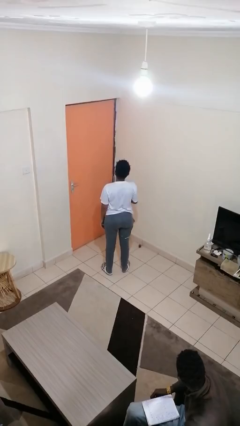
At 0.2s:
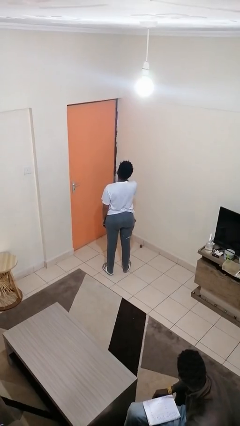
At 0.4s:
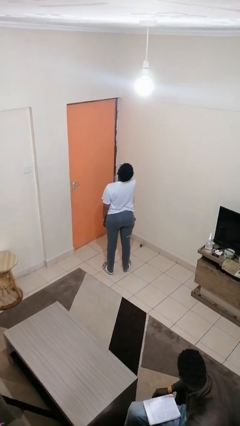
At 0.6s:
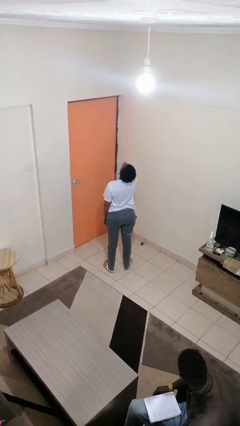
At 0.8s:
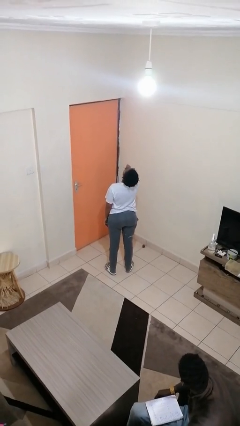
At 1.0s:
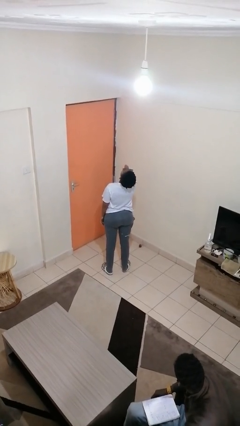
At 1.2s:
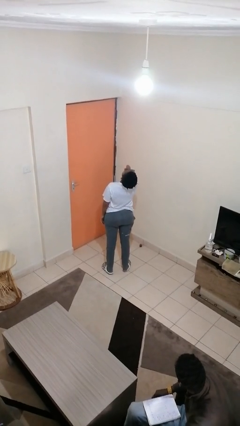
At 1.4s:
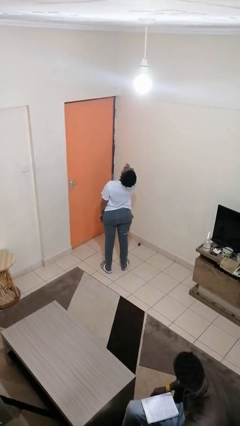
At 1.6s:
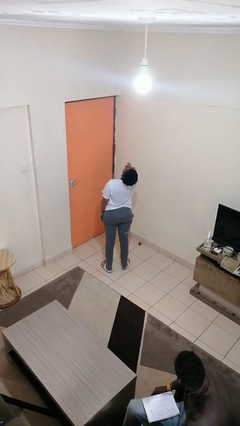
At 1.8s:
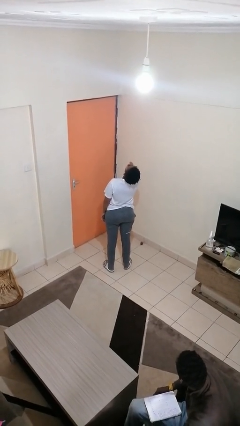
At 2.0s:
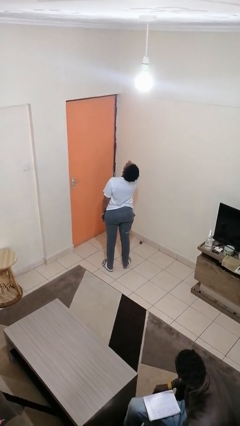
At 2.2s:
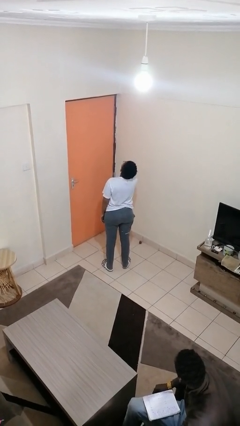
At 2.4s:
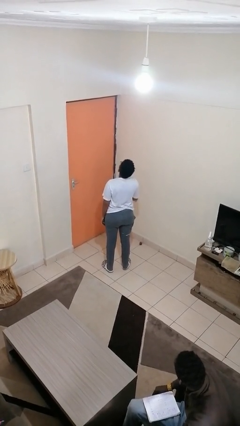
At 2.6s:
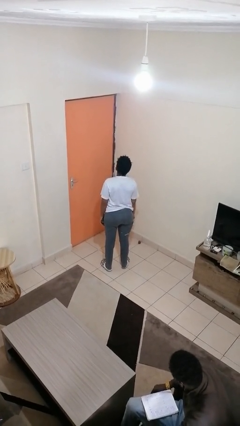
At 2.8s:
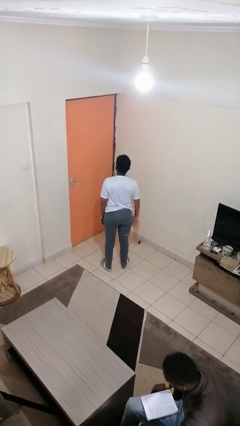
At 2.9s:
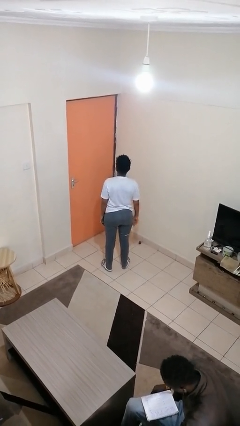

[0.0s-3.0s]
person yawns

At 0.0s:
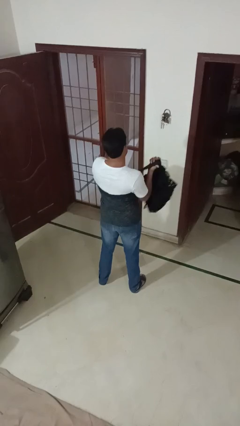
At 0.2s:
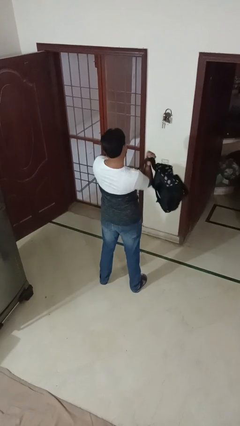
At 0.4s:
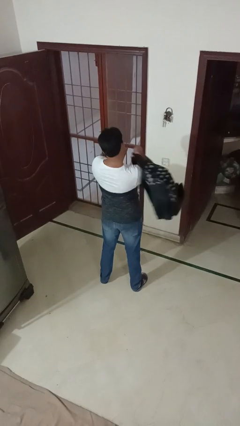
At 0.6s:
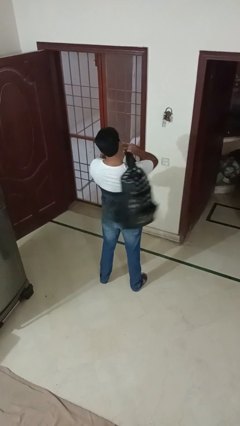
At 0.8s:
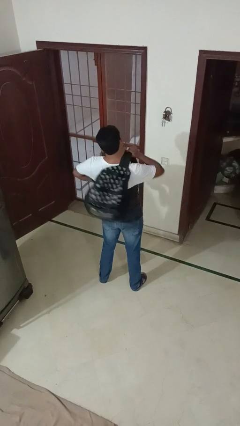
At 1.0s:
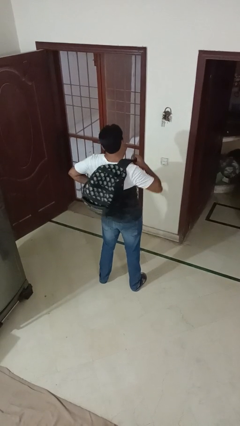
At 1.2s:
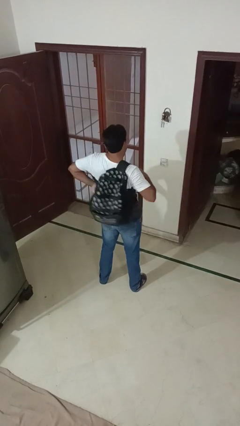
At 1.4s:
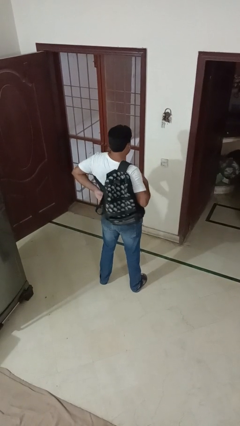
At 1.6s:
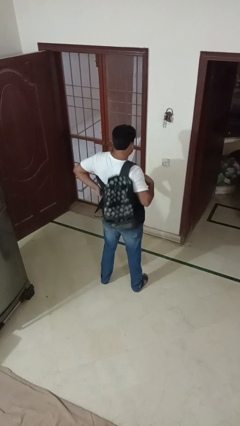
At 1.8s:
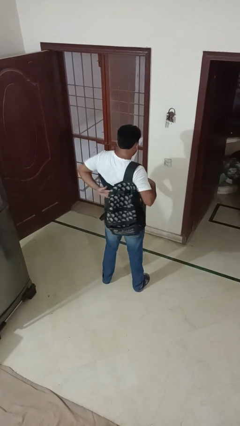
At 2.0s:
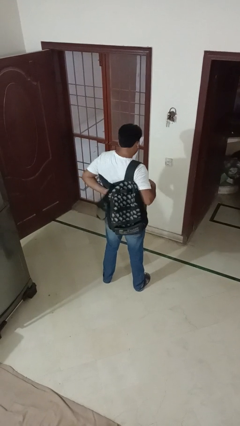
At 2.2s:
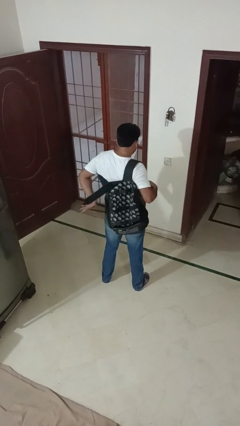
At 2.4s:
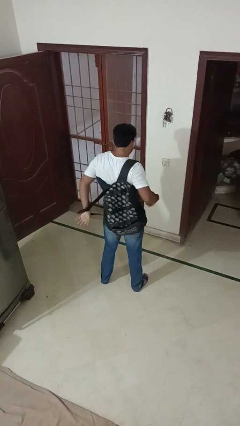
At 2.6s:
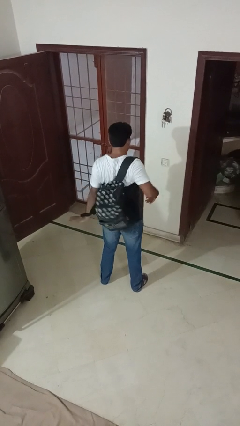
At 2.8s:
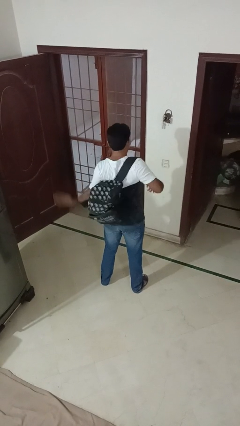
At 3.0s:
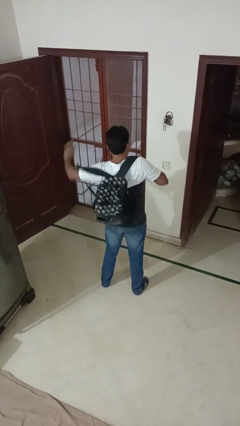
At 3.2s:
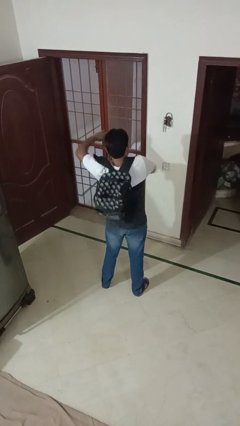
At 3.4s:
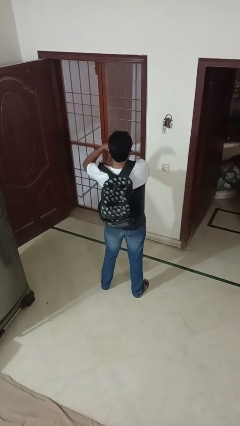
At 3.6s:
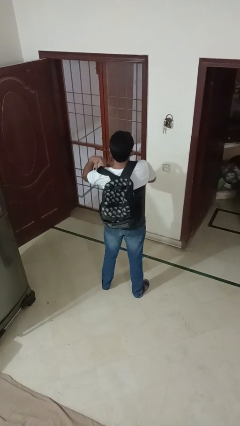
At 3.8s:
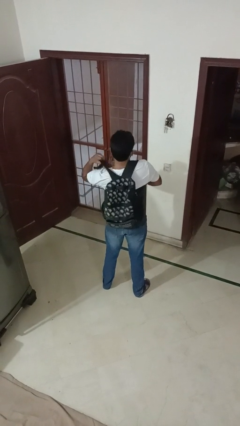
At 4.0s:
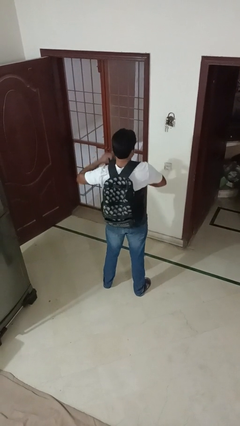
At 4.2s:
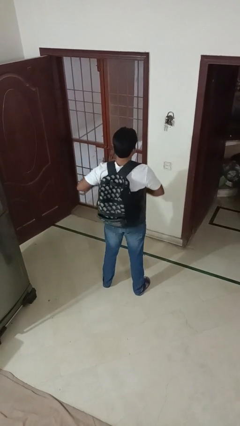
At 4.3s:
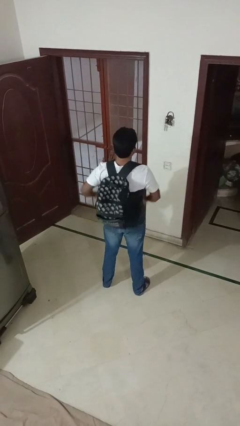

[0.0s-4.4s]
person puts on backpack

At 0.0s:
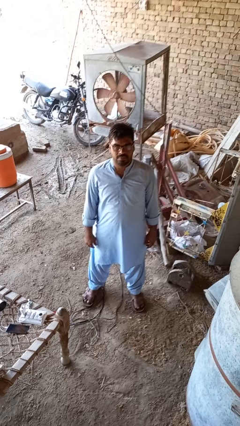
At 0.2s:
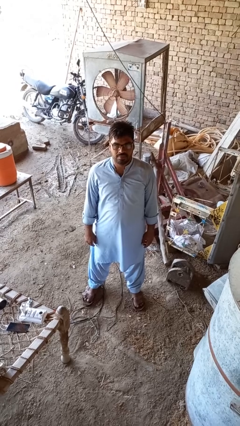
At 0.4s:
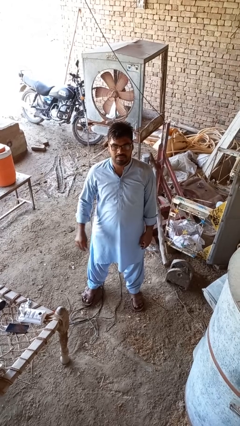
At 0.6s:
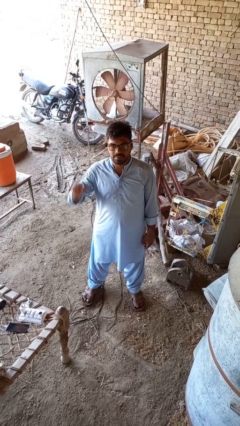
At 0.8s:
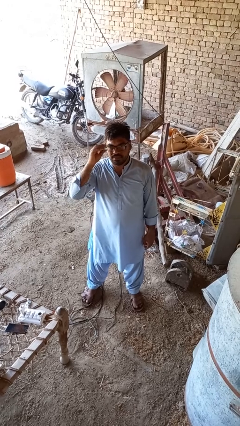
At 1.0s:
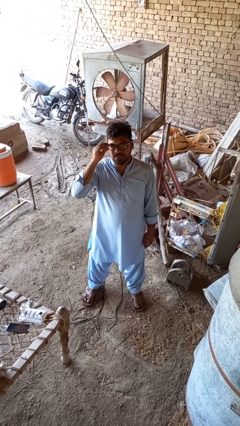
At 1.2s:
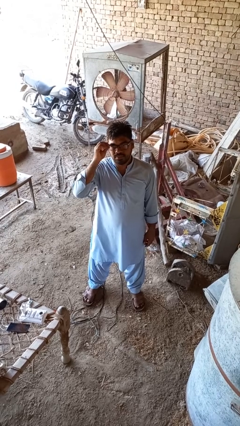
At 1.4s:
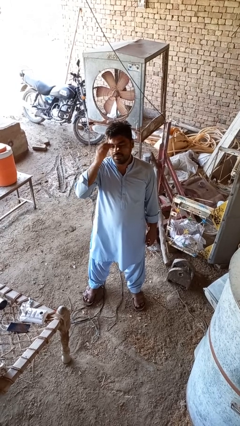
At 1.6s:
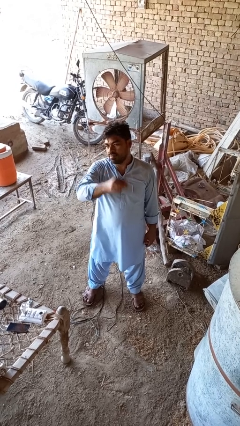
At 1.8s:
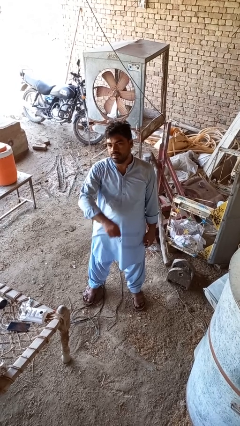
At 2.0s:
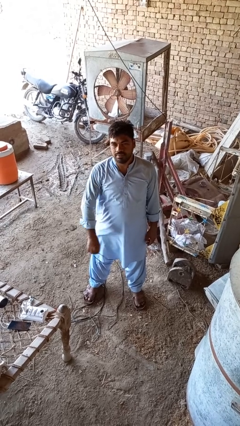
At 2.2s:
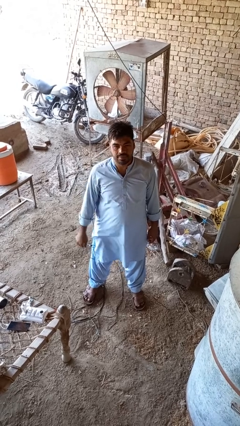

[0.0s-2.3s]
person takes off glasses

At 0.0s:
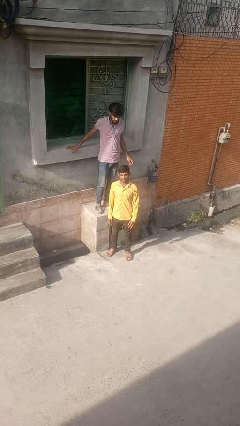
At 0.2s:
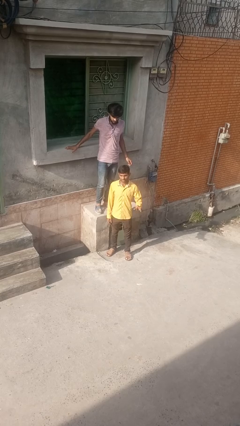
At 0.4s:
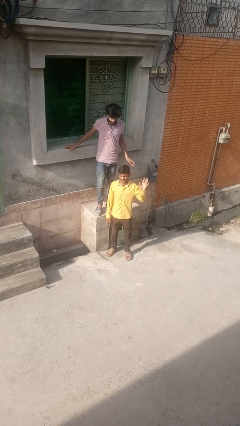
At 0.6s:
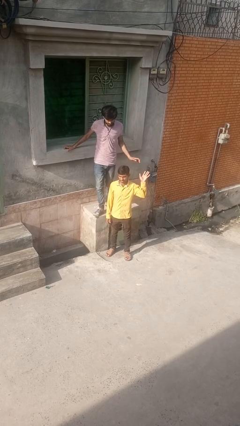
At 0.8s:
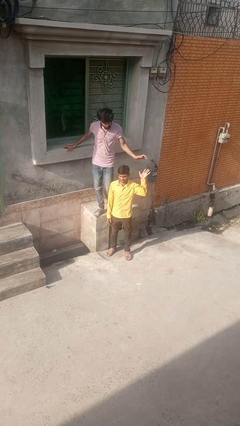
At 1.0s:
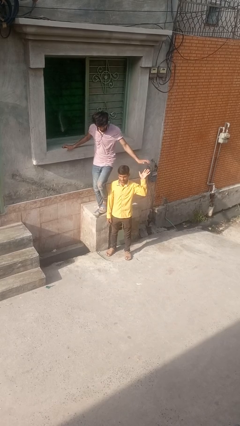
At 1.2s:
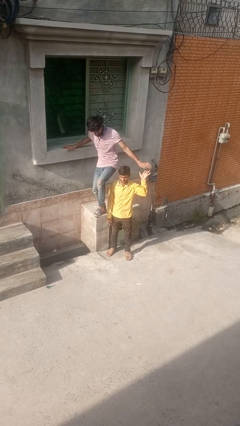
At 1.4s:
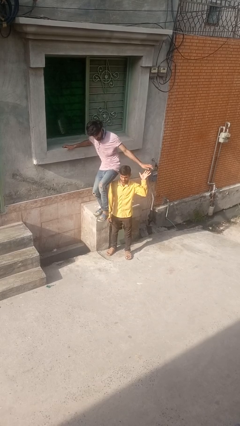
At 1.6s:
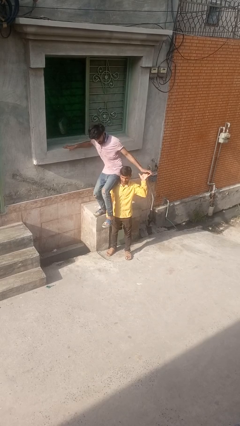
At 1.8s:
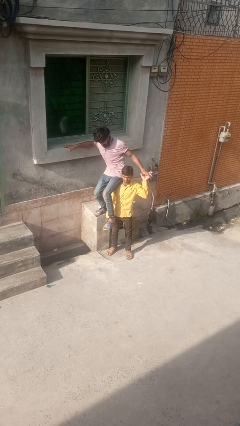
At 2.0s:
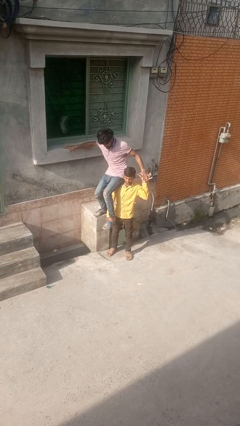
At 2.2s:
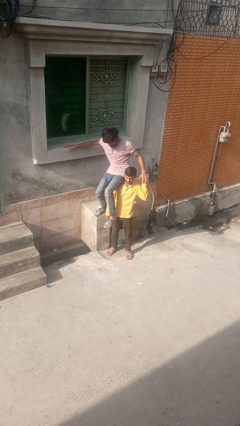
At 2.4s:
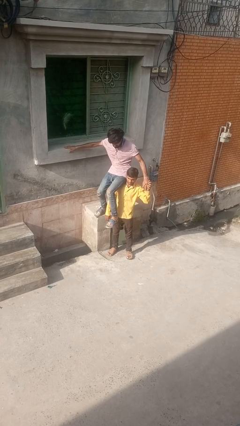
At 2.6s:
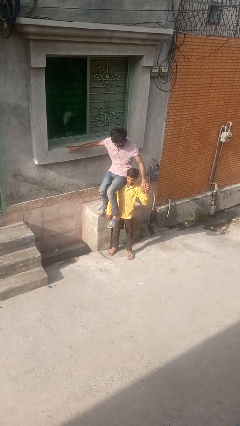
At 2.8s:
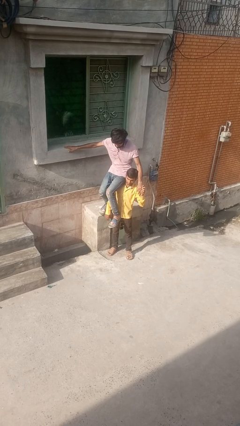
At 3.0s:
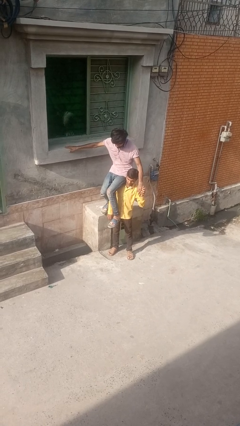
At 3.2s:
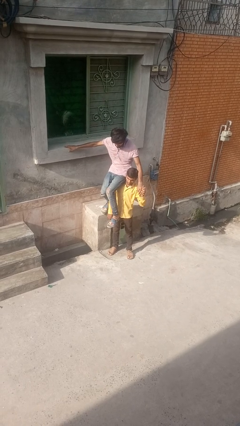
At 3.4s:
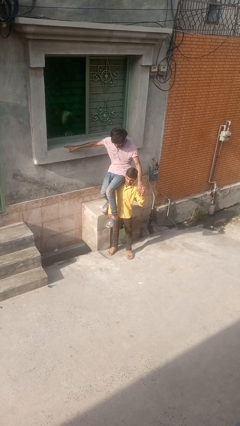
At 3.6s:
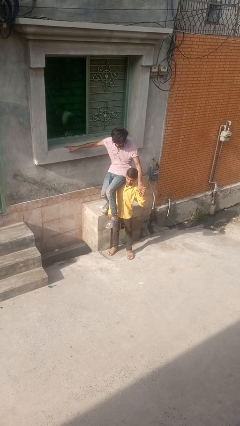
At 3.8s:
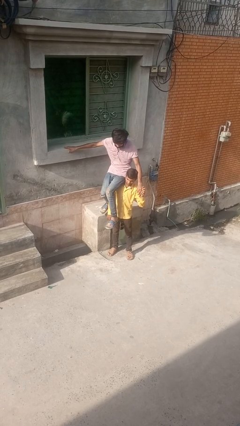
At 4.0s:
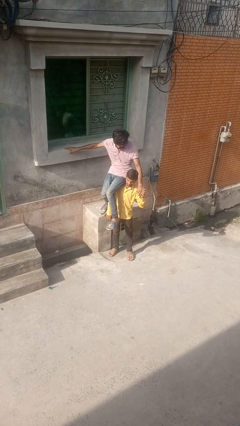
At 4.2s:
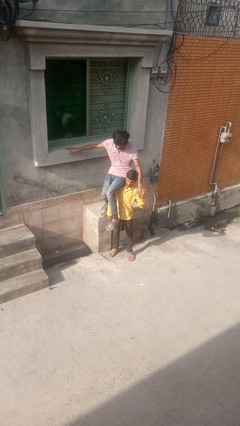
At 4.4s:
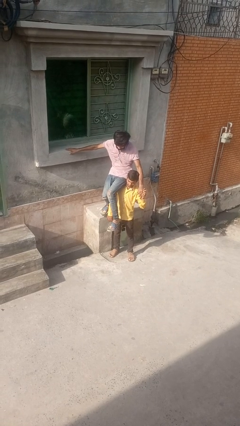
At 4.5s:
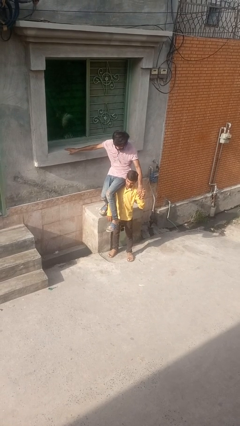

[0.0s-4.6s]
person carries person over shoulder

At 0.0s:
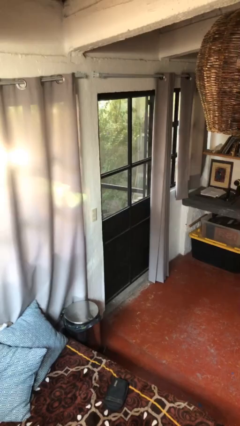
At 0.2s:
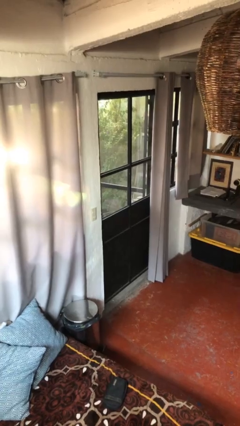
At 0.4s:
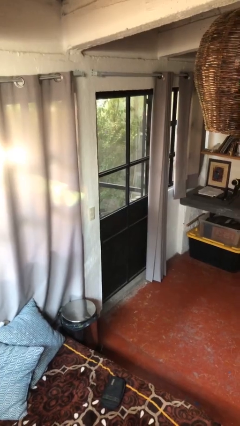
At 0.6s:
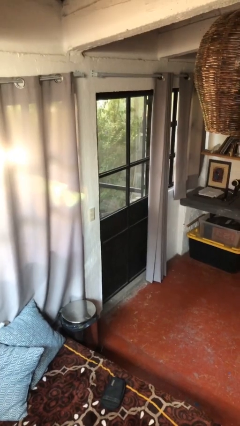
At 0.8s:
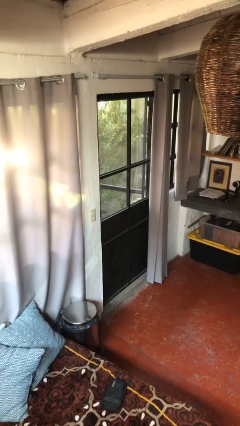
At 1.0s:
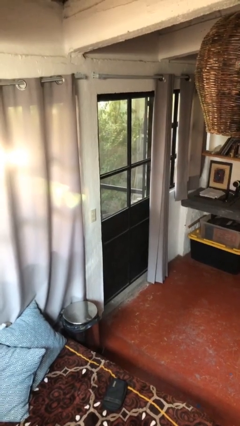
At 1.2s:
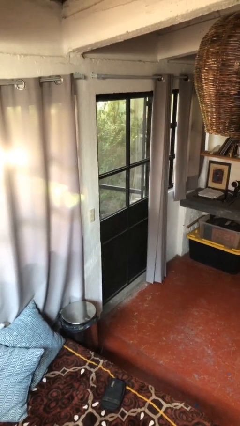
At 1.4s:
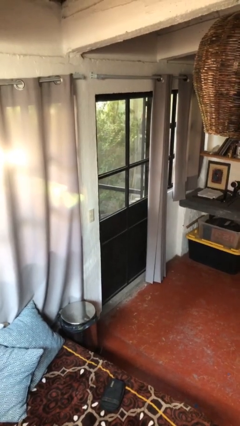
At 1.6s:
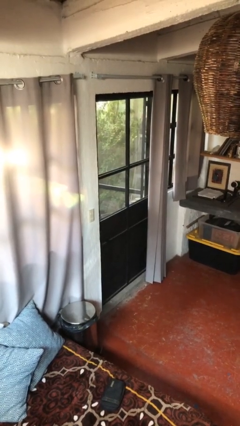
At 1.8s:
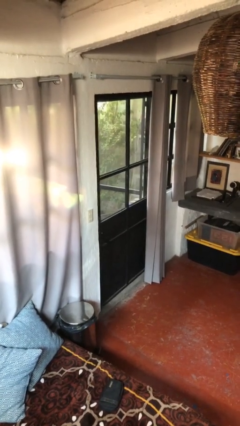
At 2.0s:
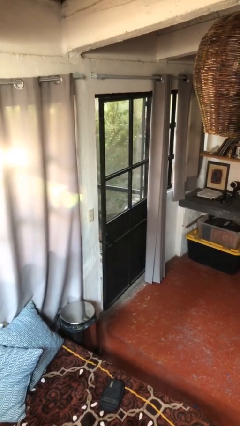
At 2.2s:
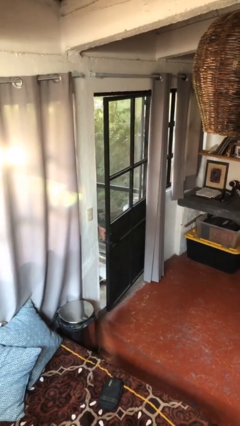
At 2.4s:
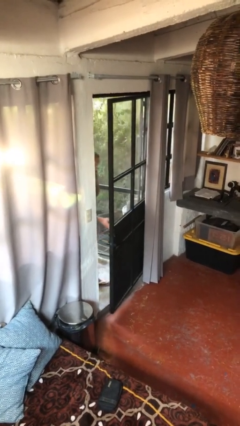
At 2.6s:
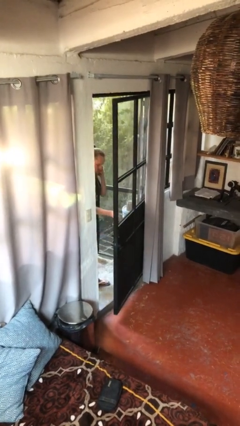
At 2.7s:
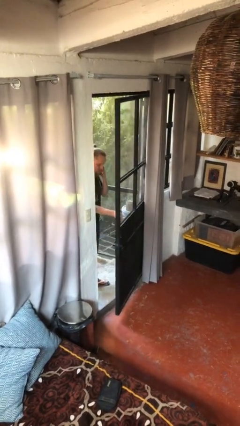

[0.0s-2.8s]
person opens facility door
